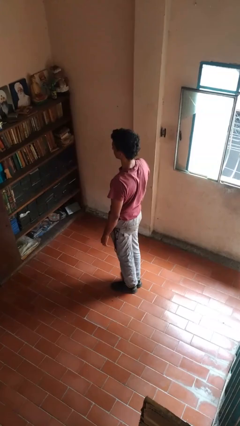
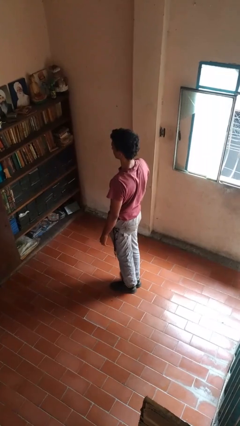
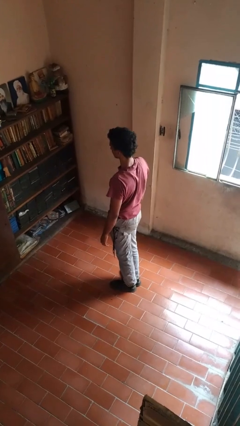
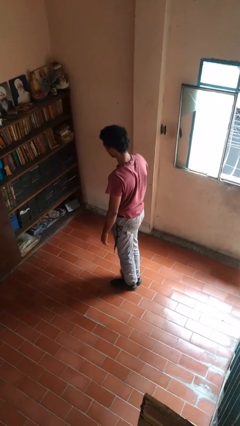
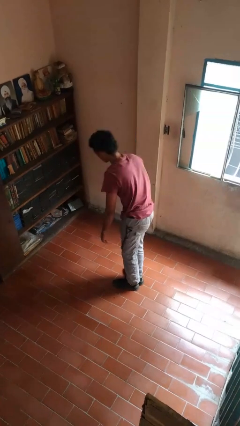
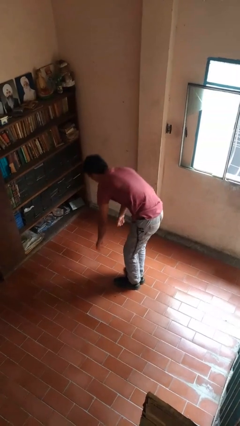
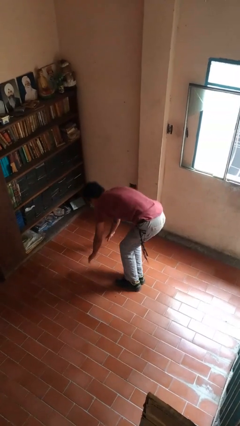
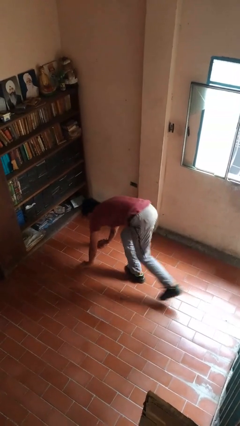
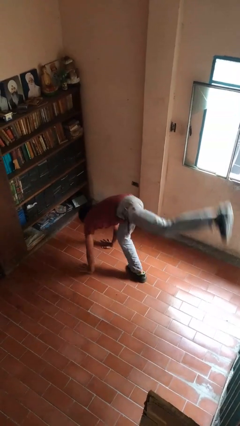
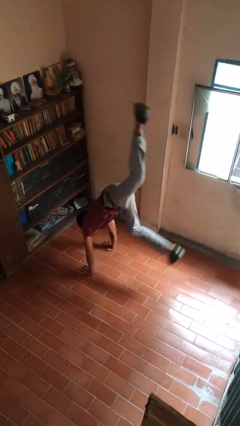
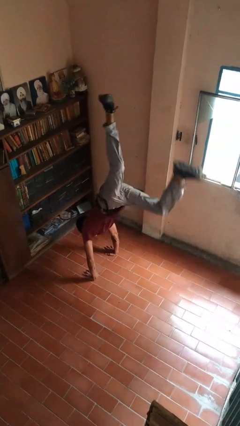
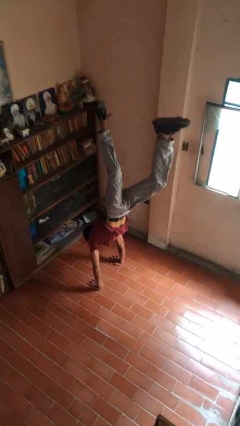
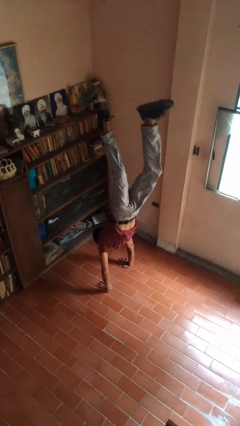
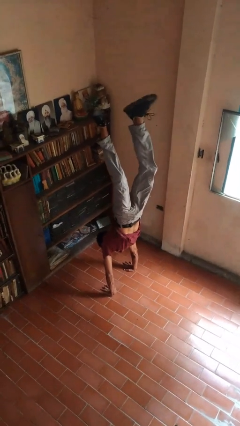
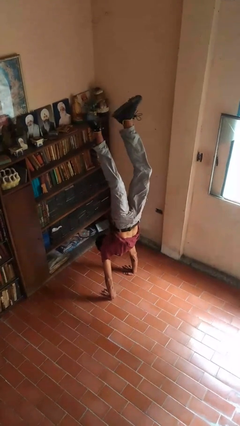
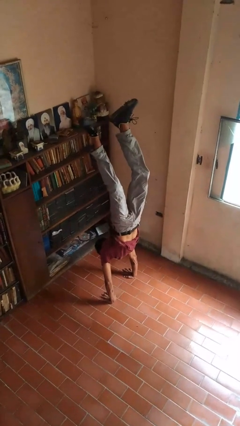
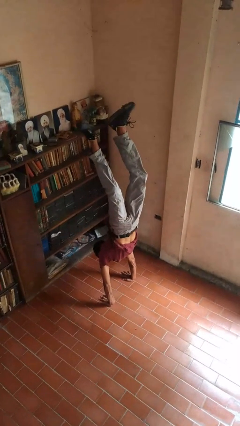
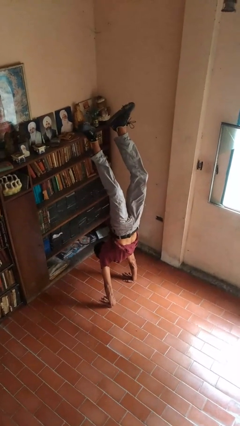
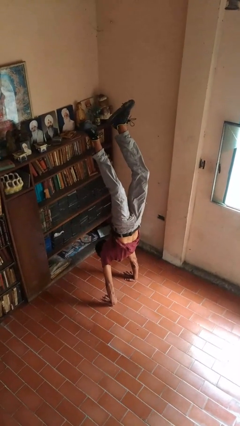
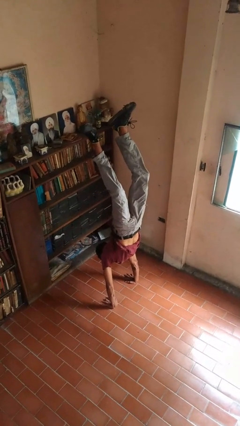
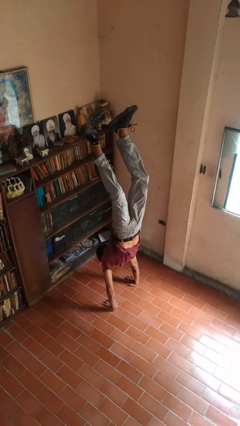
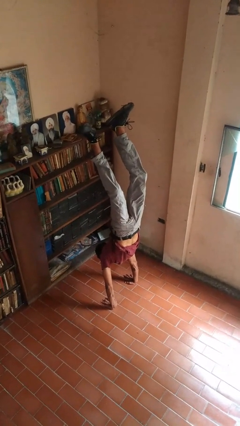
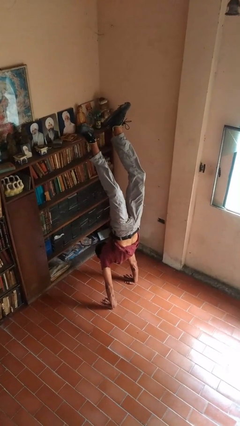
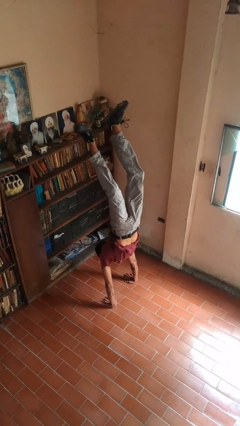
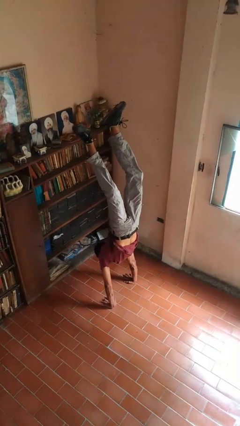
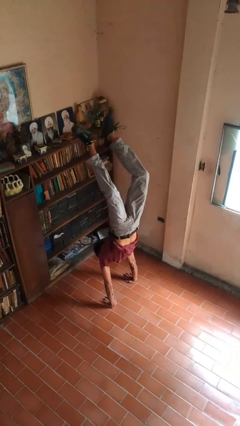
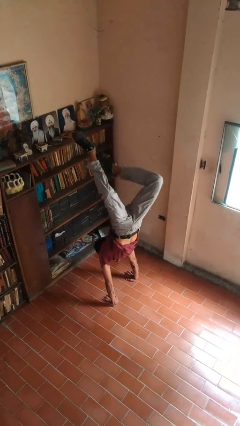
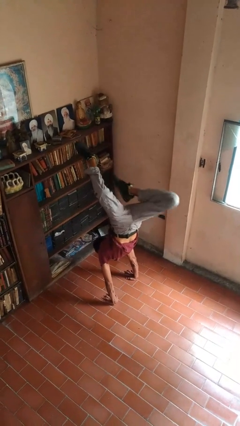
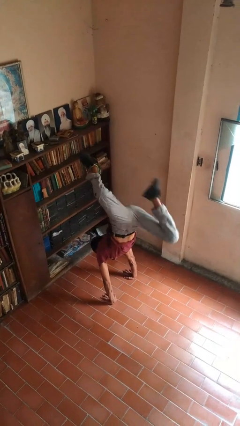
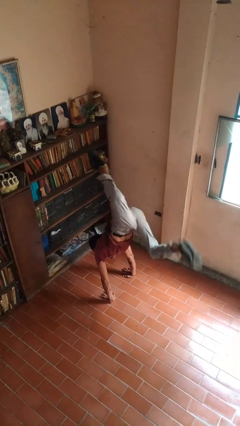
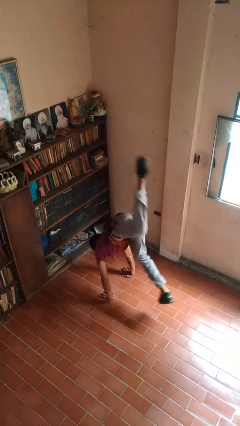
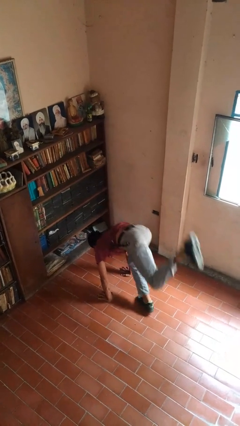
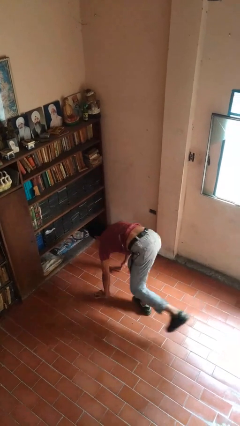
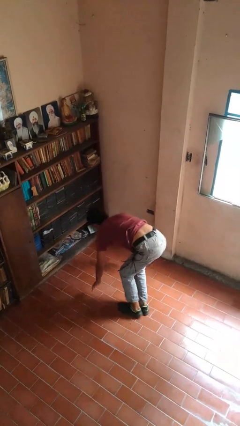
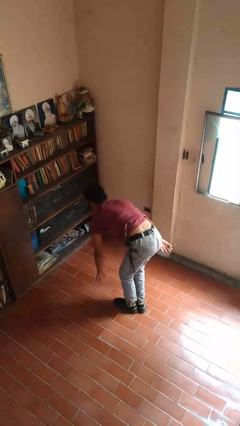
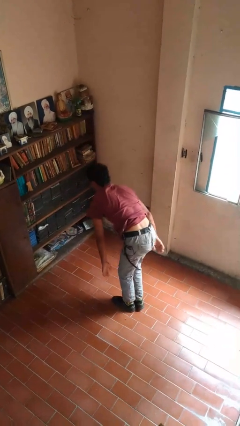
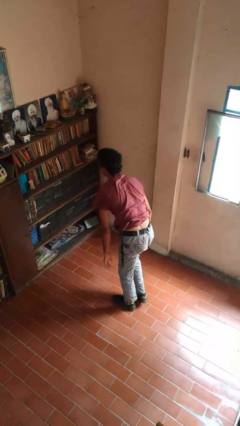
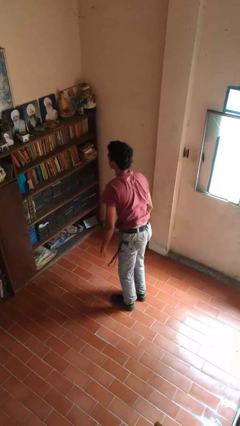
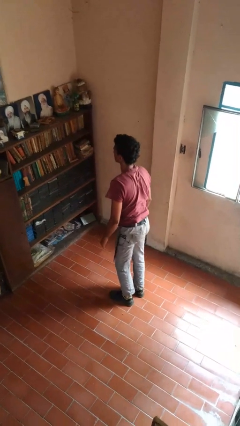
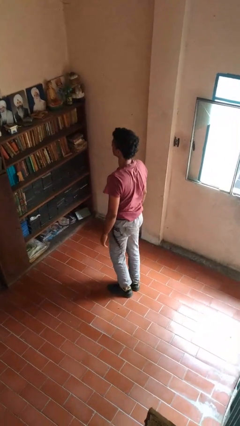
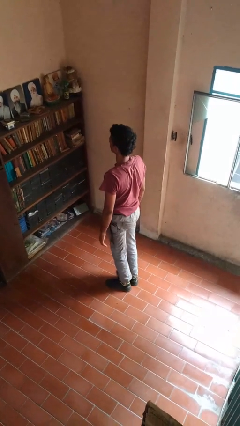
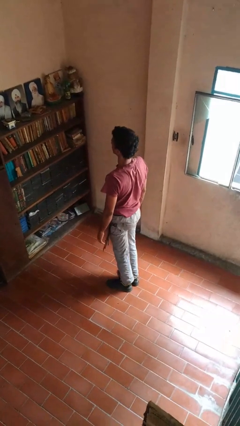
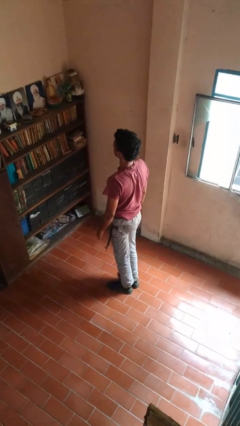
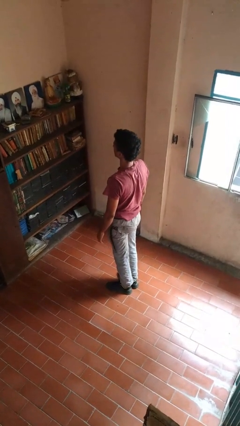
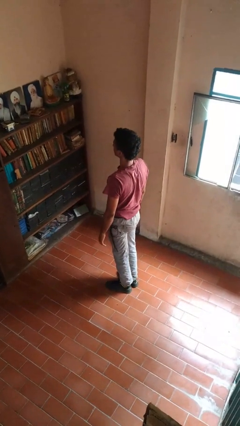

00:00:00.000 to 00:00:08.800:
person handstand

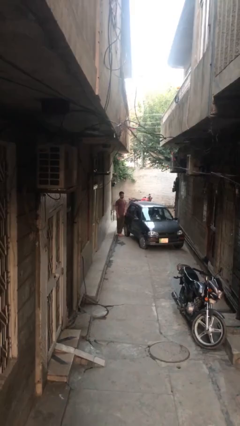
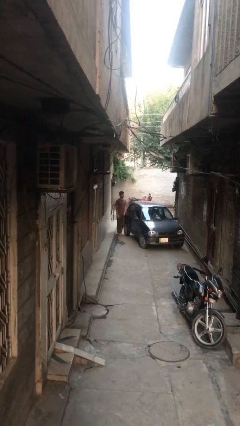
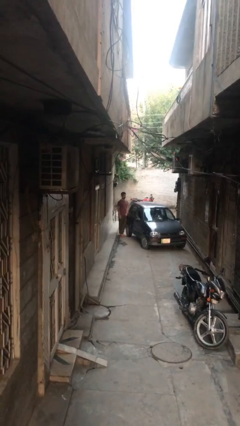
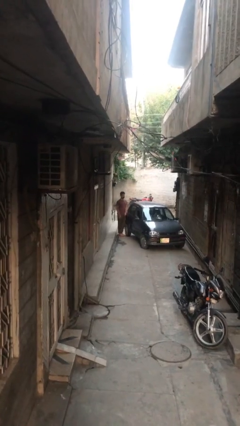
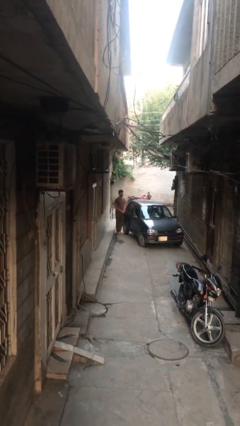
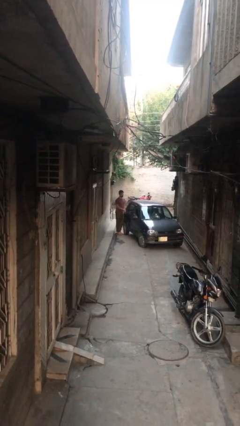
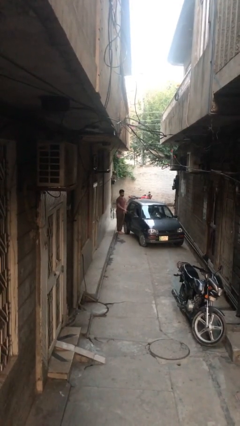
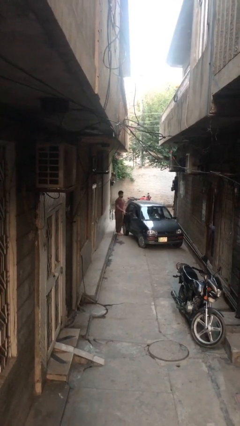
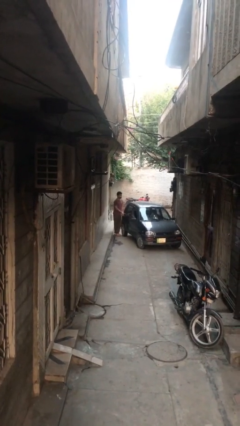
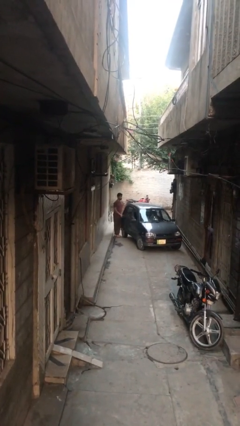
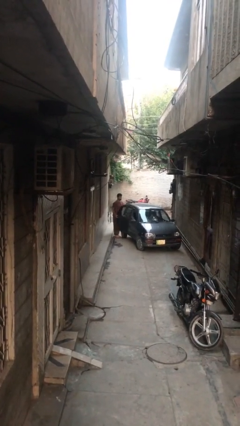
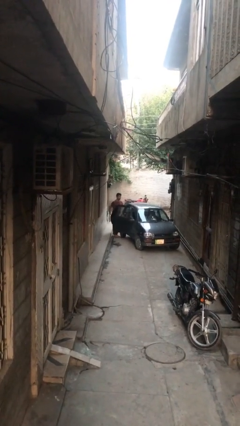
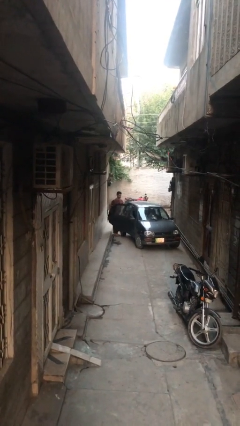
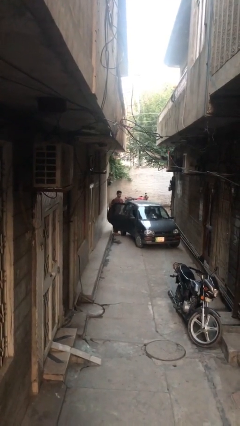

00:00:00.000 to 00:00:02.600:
person opens car door

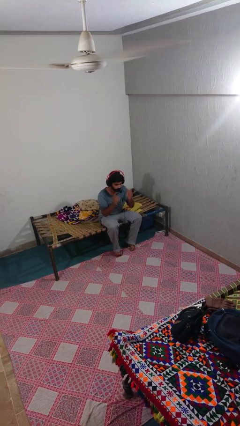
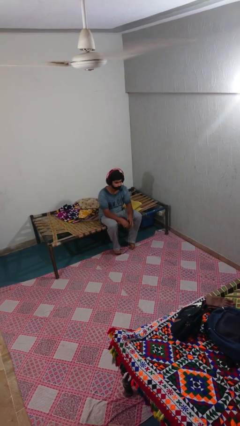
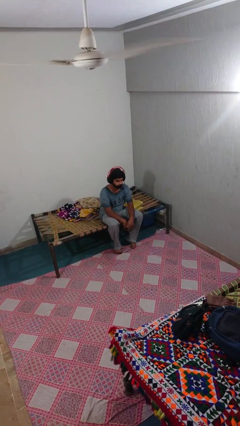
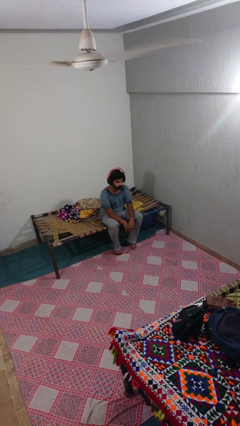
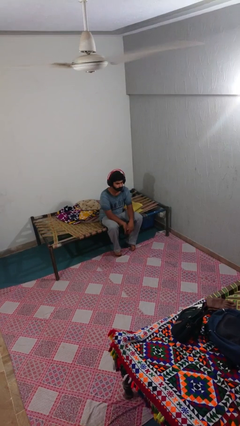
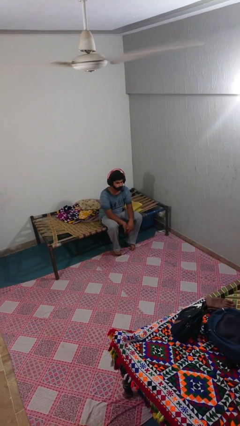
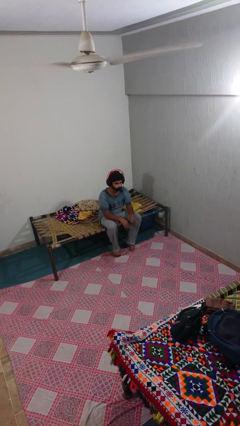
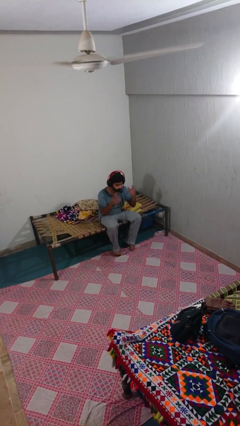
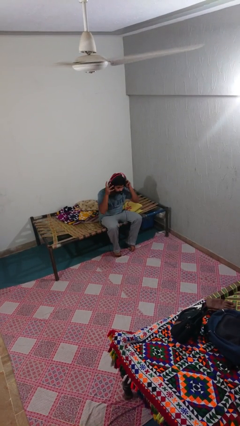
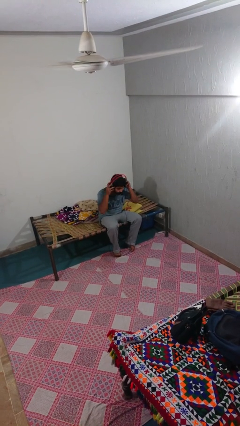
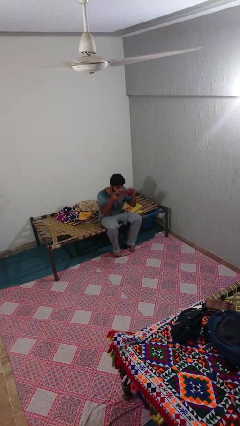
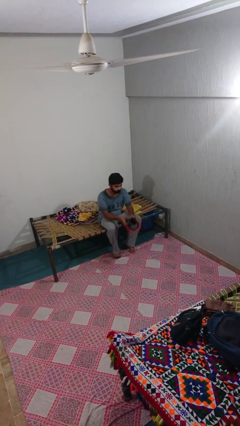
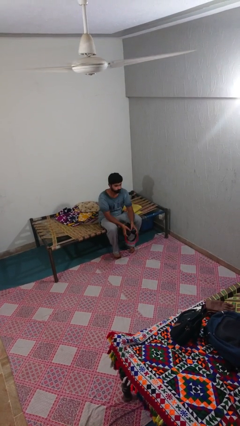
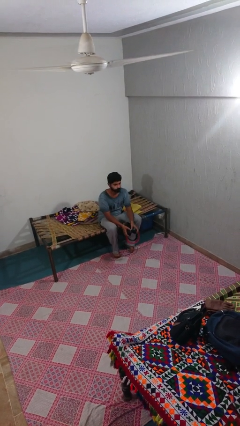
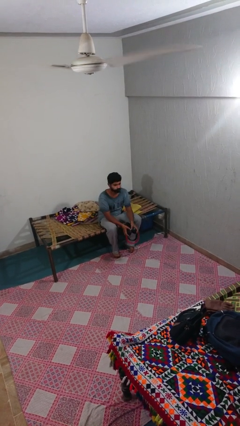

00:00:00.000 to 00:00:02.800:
person takes off headphones

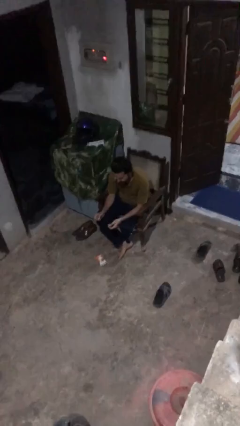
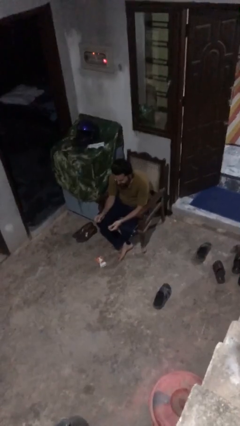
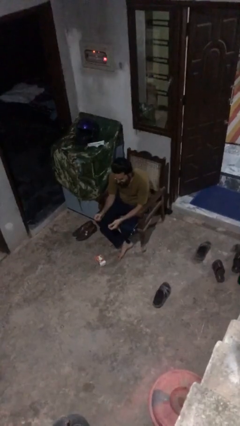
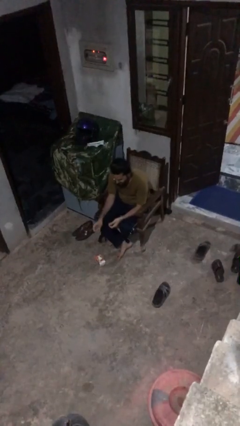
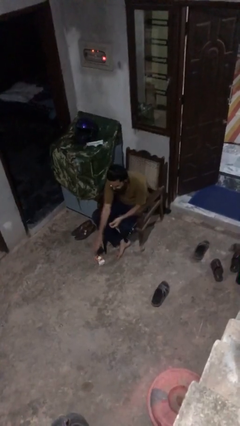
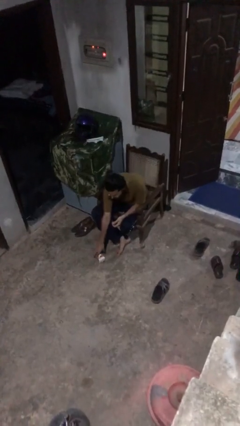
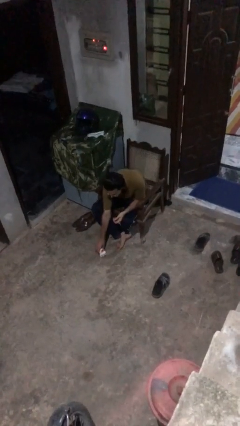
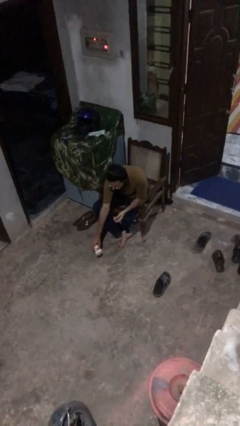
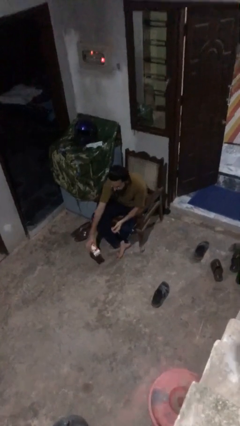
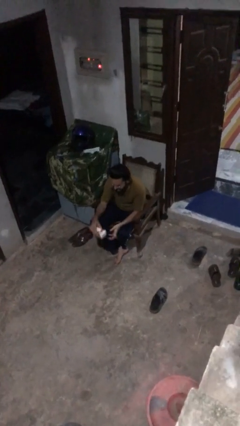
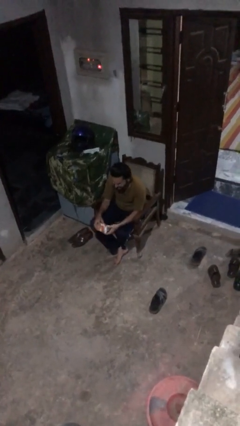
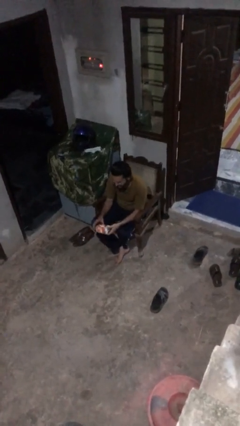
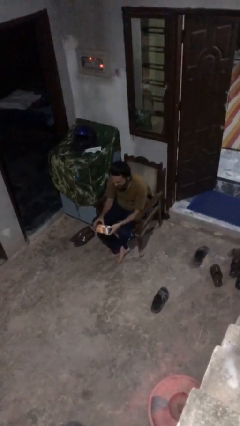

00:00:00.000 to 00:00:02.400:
person picks up object from floor

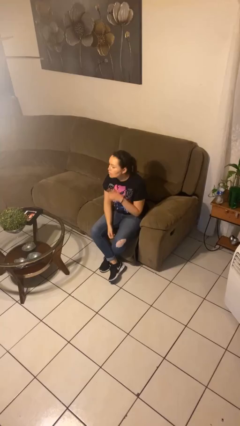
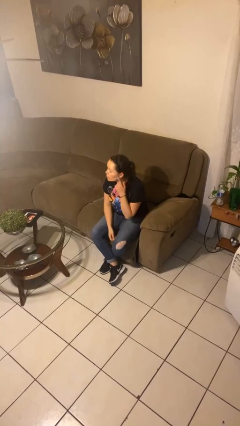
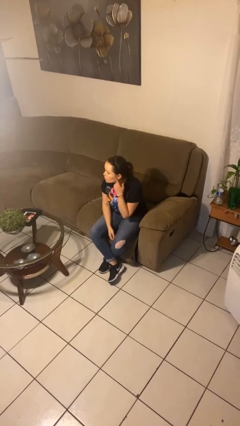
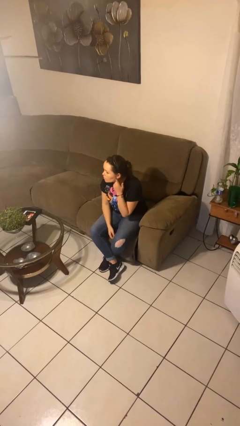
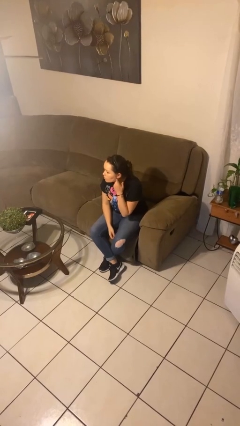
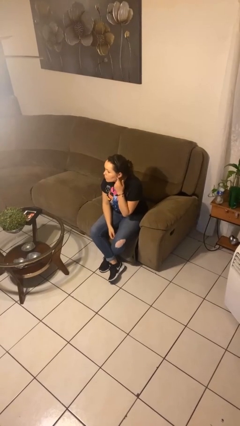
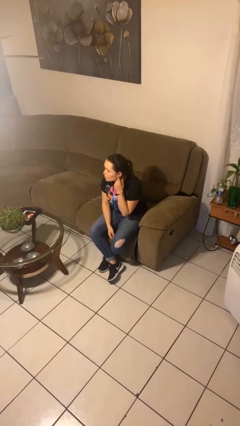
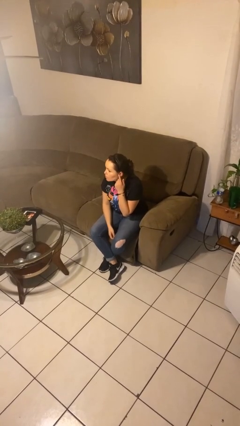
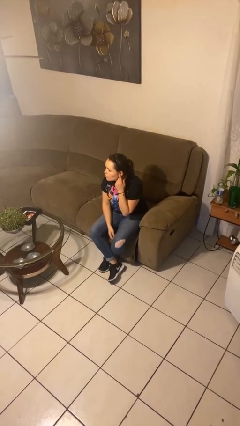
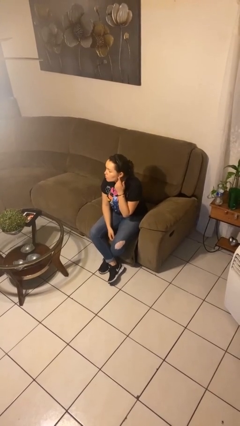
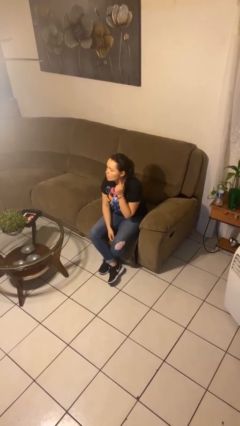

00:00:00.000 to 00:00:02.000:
person gestures listen closely
